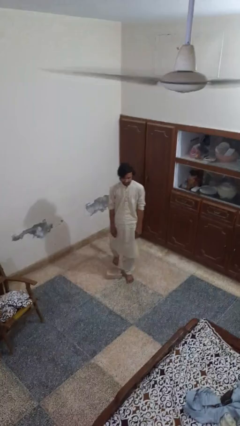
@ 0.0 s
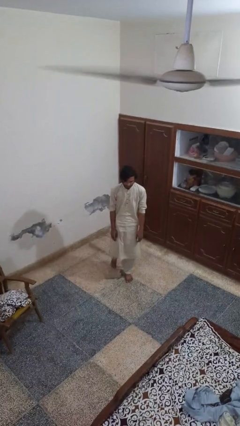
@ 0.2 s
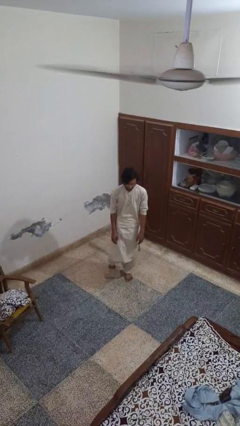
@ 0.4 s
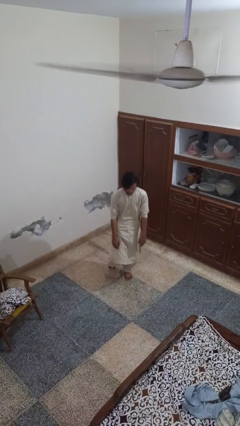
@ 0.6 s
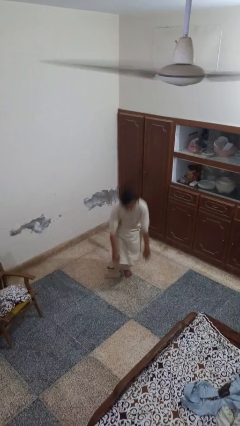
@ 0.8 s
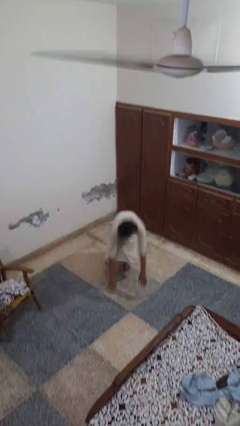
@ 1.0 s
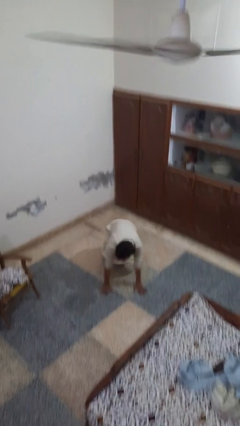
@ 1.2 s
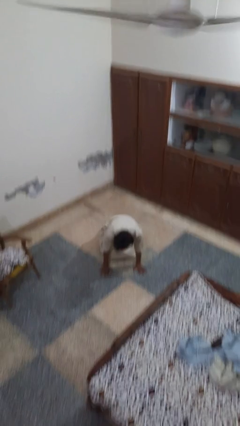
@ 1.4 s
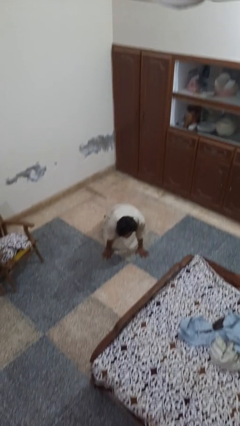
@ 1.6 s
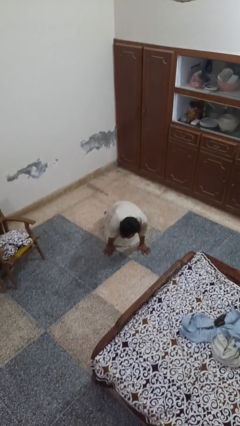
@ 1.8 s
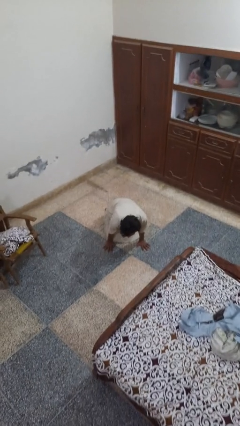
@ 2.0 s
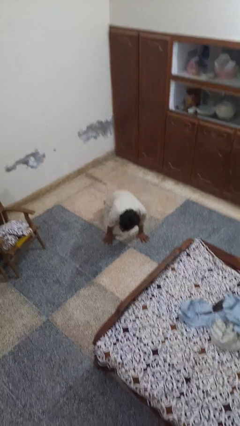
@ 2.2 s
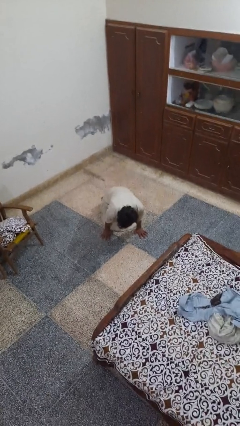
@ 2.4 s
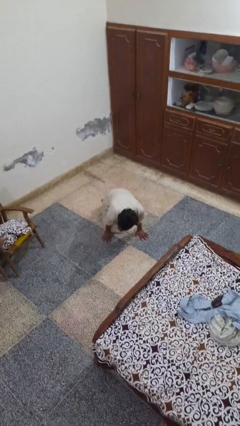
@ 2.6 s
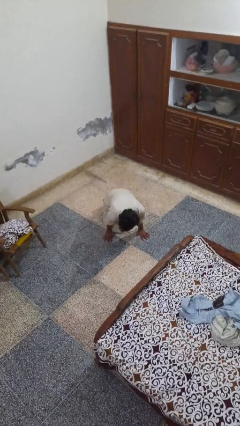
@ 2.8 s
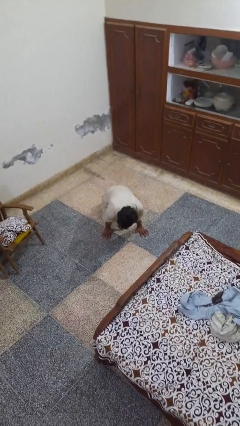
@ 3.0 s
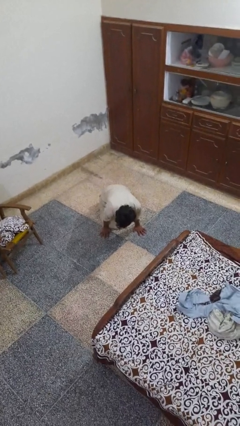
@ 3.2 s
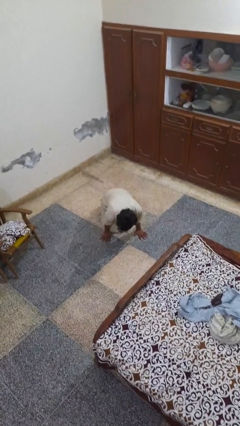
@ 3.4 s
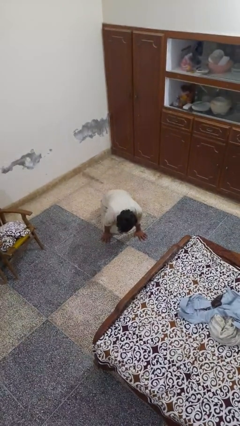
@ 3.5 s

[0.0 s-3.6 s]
person trips on object on floor

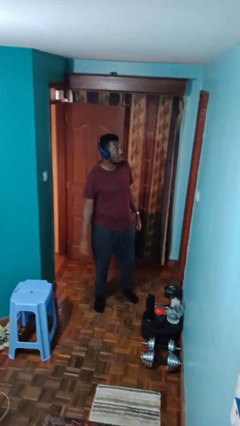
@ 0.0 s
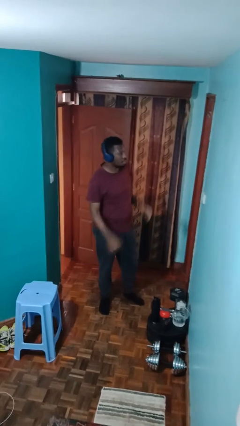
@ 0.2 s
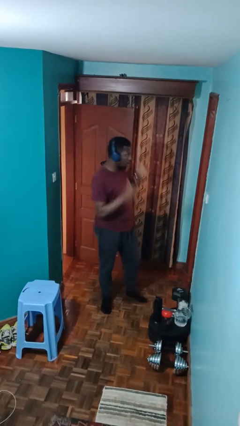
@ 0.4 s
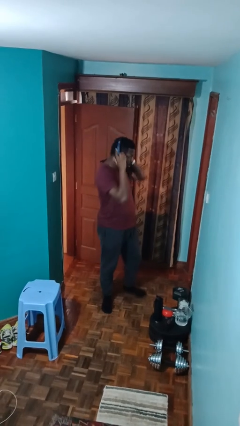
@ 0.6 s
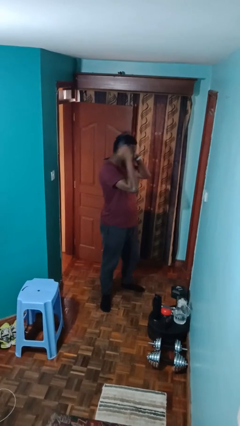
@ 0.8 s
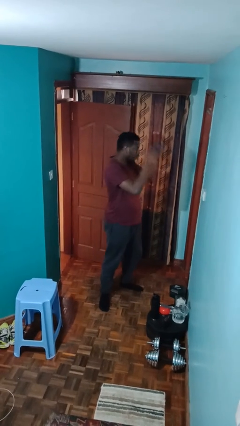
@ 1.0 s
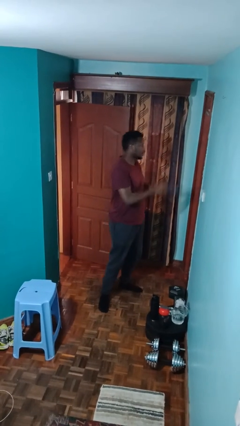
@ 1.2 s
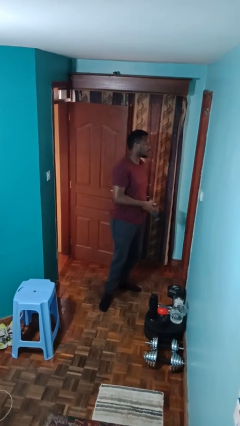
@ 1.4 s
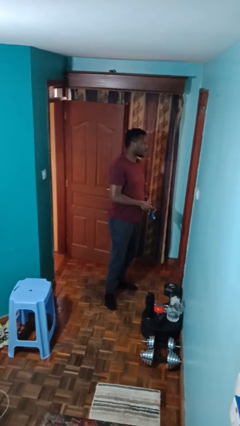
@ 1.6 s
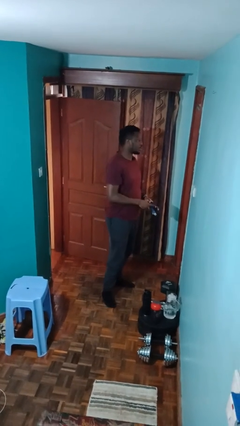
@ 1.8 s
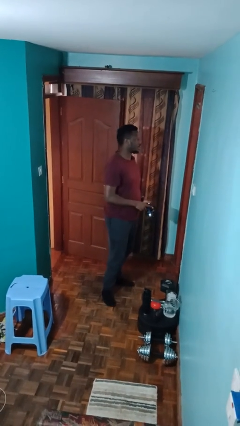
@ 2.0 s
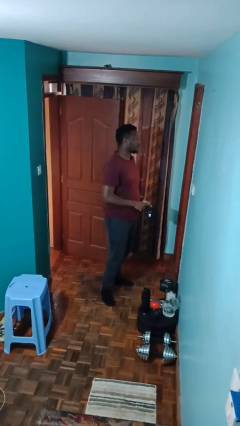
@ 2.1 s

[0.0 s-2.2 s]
person takes off headphones

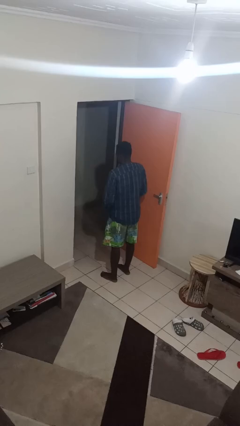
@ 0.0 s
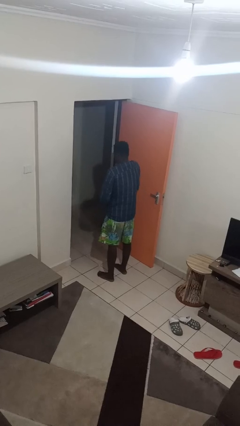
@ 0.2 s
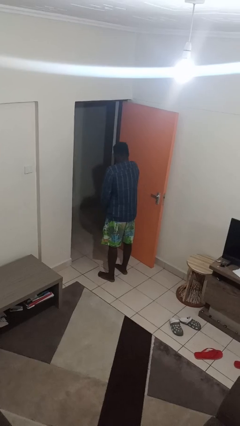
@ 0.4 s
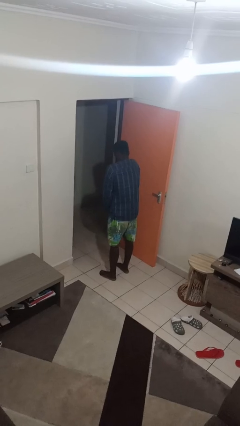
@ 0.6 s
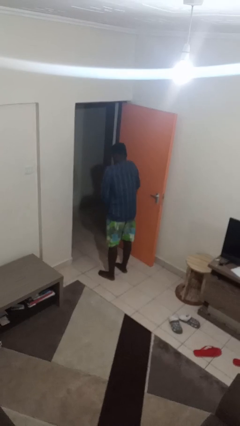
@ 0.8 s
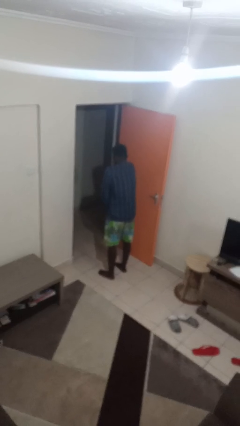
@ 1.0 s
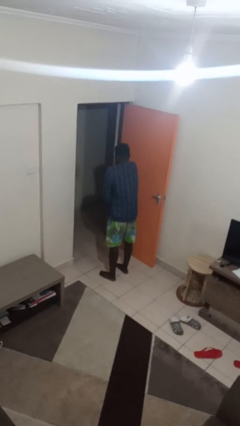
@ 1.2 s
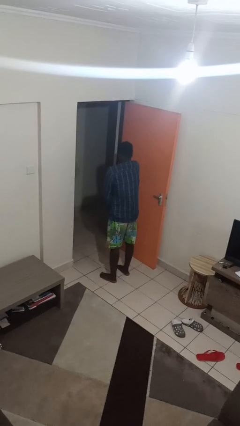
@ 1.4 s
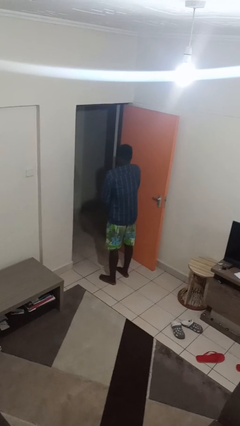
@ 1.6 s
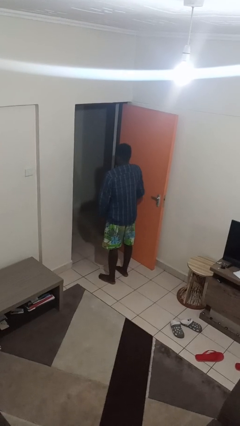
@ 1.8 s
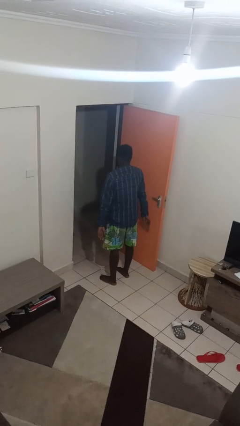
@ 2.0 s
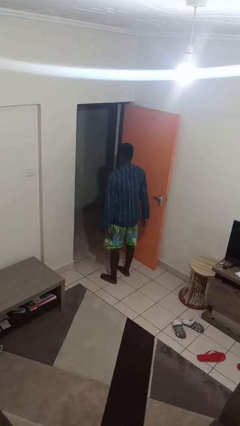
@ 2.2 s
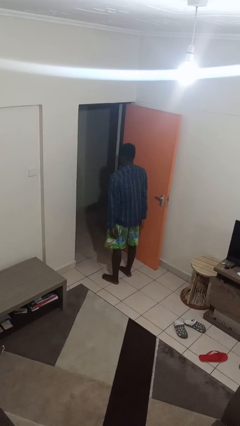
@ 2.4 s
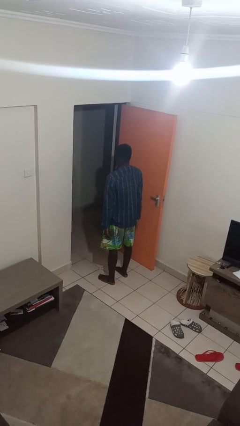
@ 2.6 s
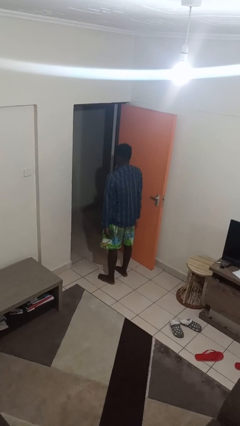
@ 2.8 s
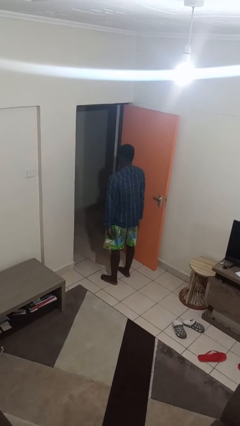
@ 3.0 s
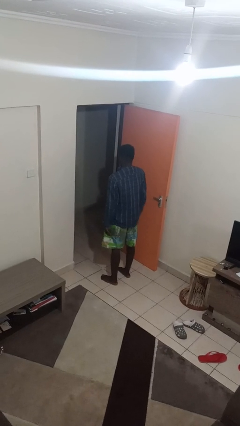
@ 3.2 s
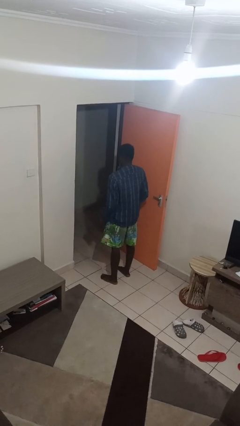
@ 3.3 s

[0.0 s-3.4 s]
person zips up jacket

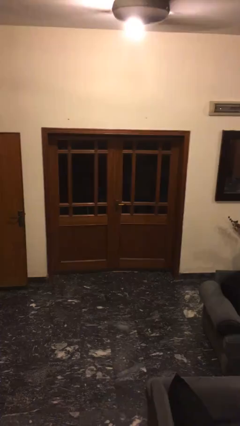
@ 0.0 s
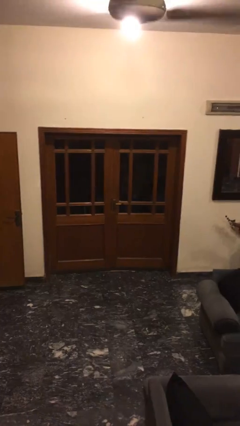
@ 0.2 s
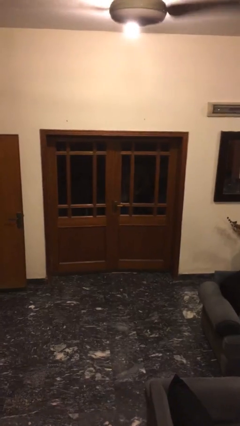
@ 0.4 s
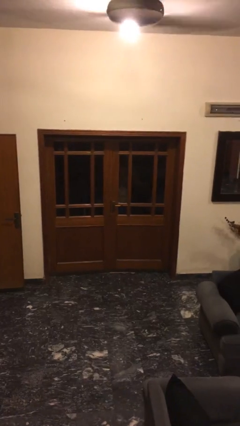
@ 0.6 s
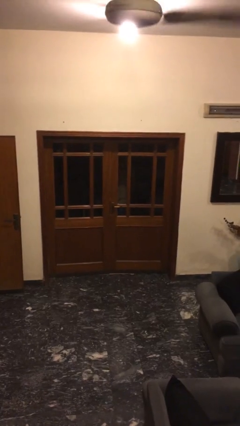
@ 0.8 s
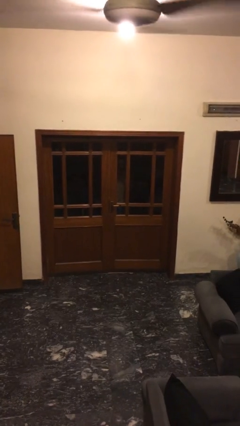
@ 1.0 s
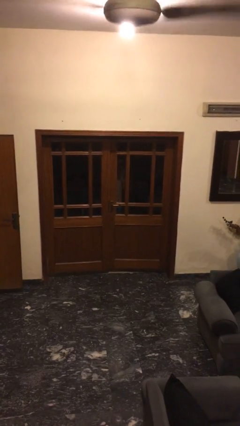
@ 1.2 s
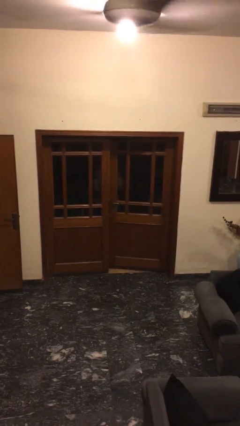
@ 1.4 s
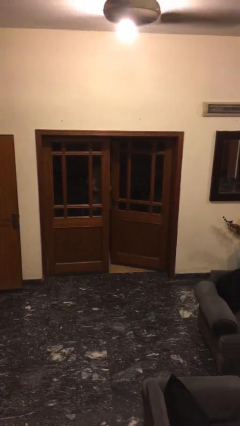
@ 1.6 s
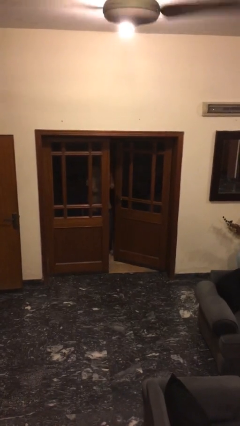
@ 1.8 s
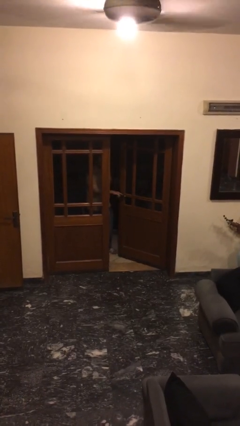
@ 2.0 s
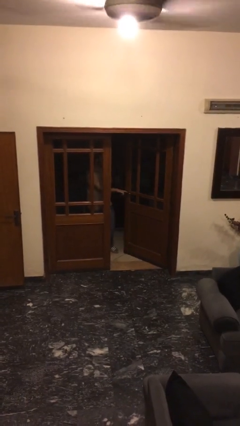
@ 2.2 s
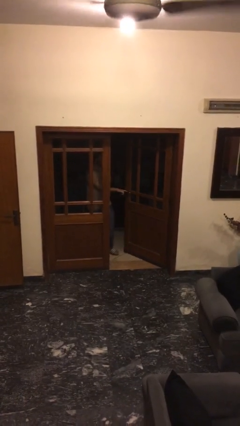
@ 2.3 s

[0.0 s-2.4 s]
person opens facility door

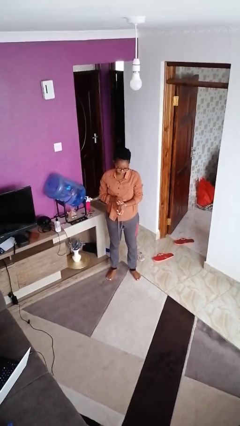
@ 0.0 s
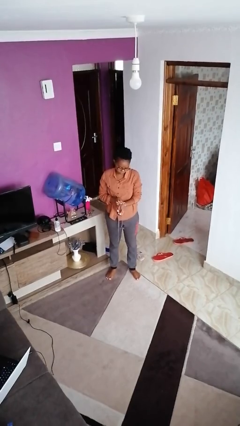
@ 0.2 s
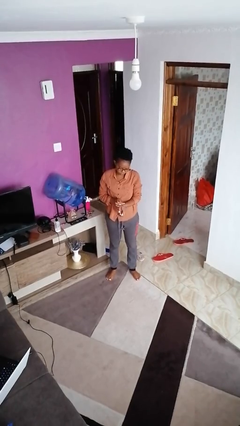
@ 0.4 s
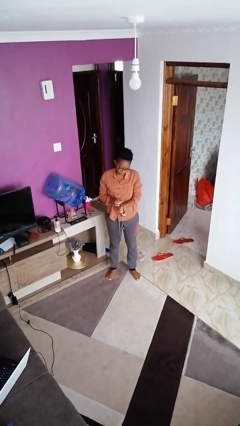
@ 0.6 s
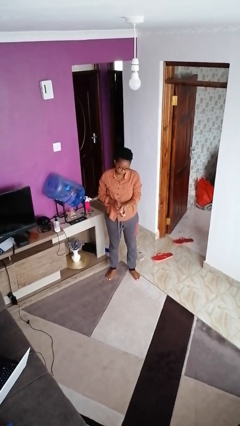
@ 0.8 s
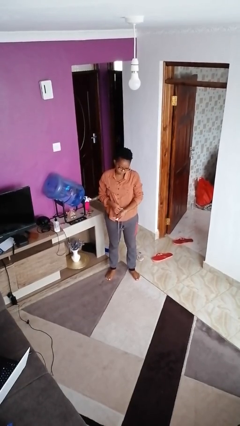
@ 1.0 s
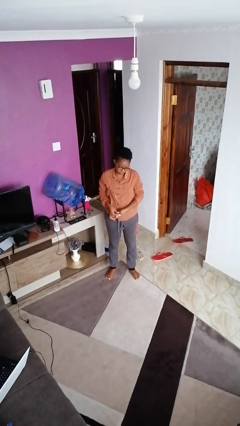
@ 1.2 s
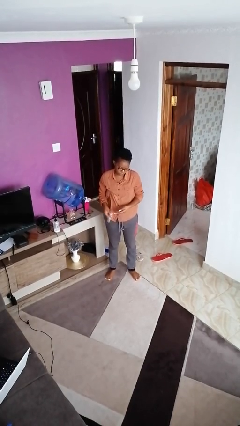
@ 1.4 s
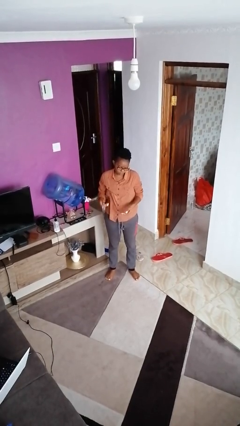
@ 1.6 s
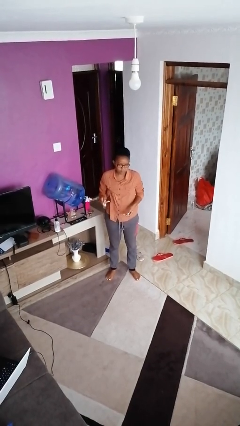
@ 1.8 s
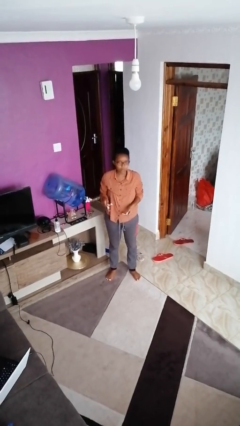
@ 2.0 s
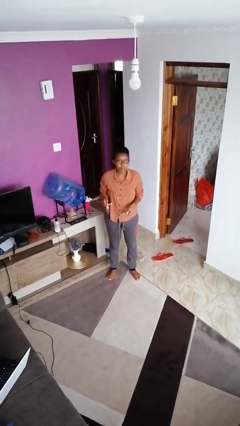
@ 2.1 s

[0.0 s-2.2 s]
person takes off wristwatch

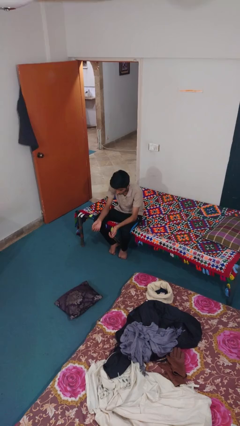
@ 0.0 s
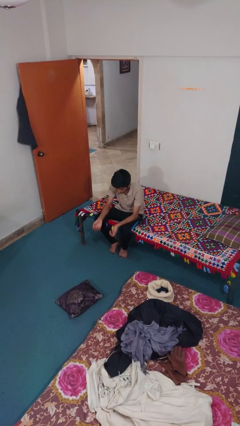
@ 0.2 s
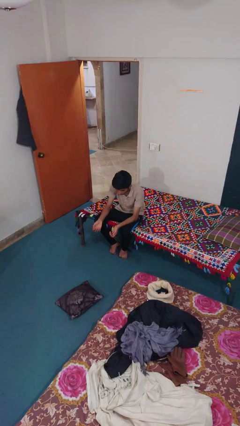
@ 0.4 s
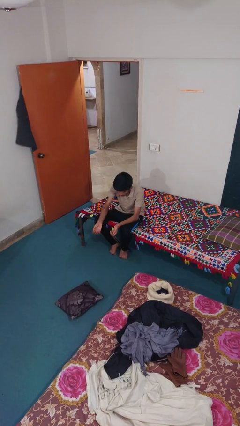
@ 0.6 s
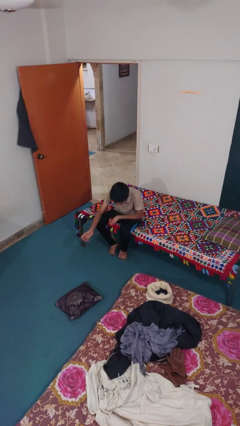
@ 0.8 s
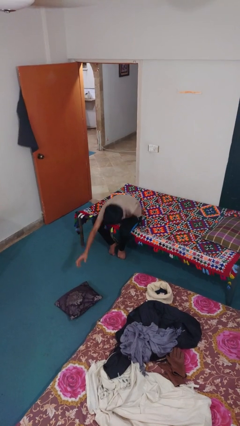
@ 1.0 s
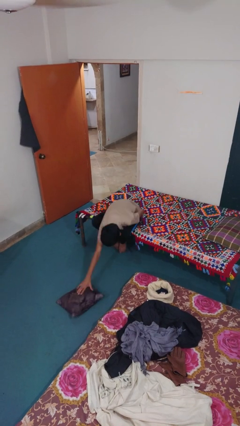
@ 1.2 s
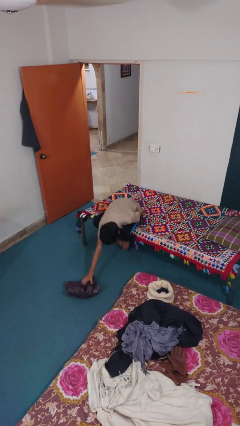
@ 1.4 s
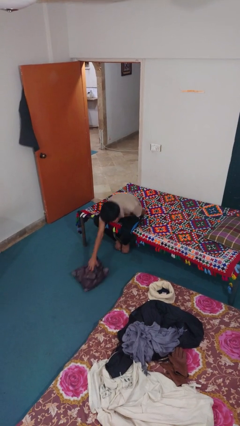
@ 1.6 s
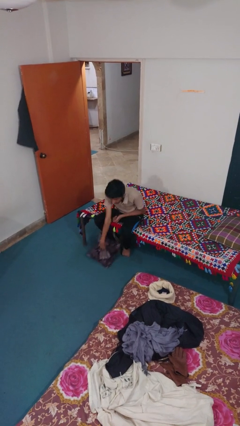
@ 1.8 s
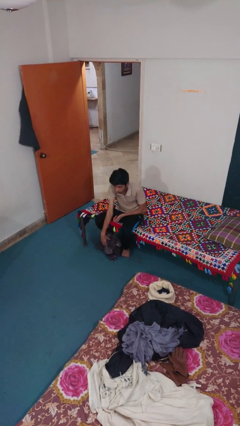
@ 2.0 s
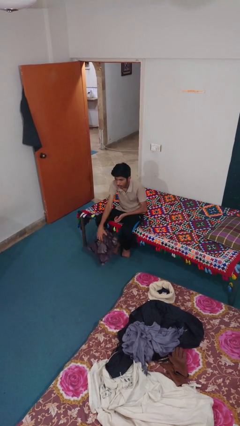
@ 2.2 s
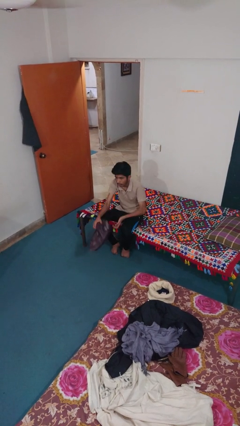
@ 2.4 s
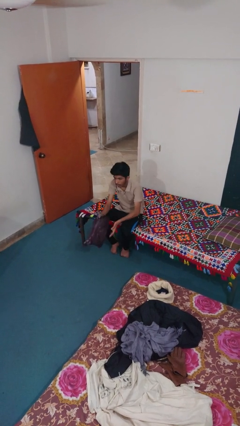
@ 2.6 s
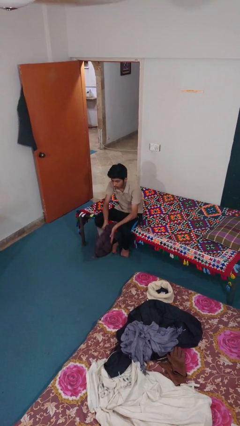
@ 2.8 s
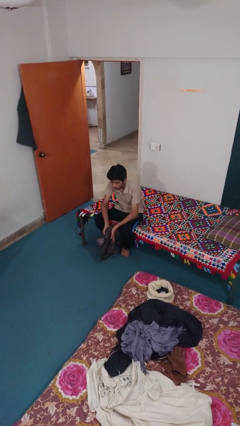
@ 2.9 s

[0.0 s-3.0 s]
person picks up object from floor

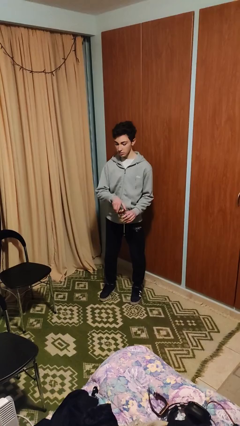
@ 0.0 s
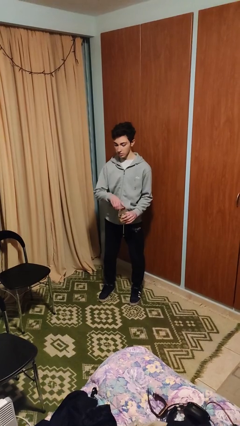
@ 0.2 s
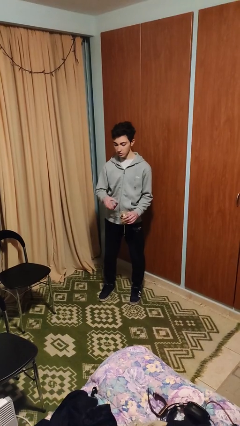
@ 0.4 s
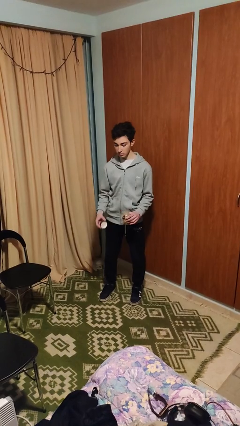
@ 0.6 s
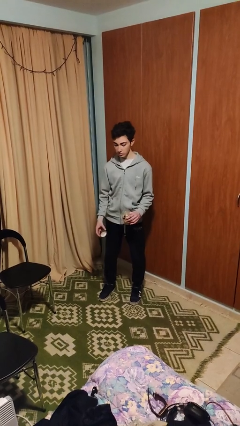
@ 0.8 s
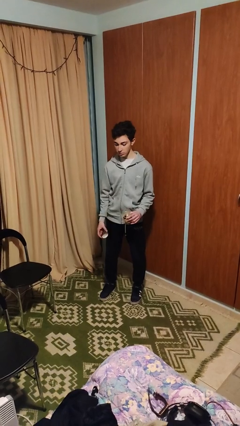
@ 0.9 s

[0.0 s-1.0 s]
person opens jar
